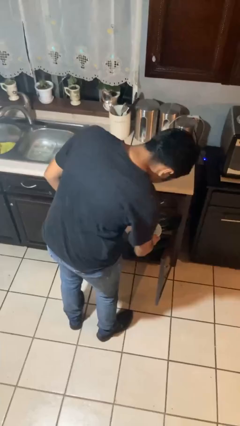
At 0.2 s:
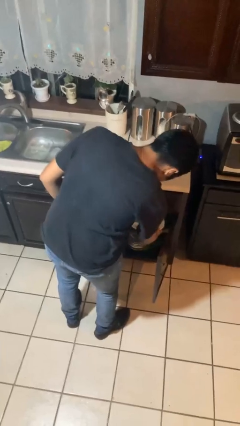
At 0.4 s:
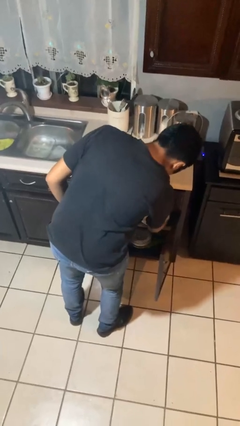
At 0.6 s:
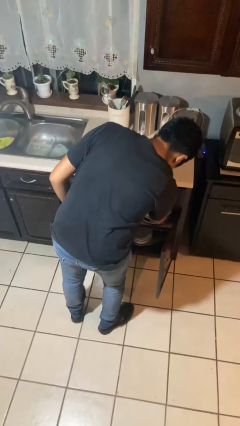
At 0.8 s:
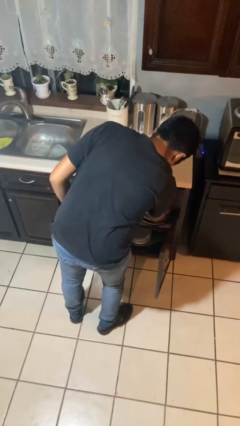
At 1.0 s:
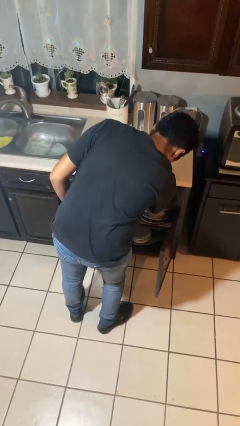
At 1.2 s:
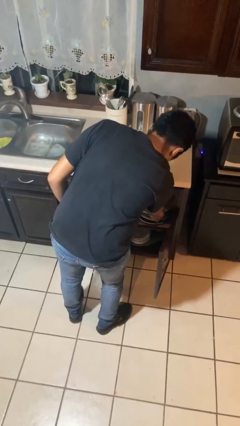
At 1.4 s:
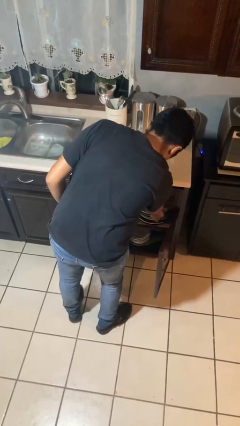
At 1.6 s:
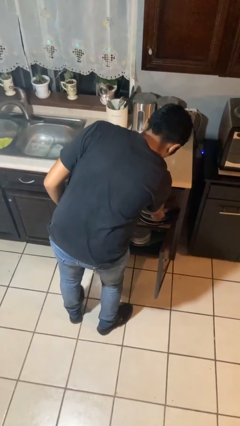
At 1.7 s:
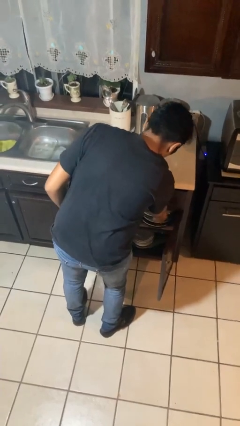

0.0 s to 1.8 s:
person takes object from cabinet

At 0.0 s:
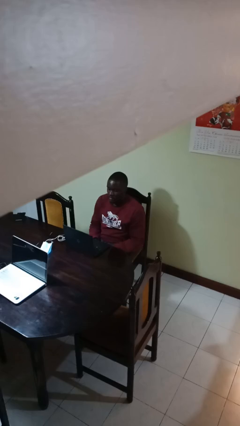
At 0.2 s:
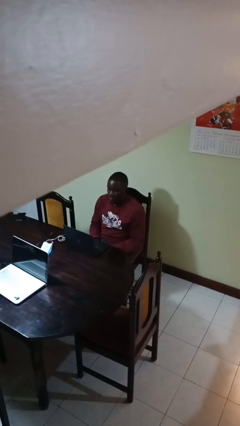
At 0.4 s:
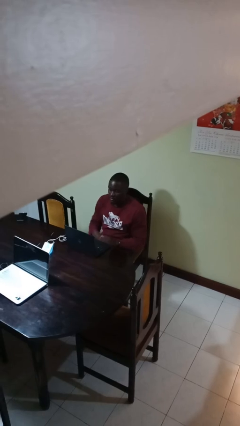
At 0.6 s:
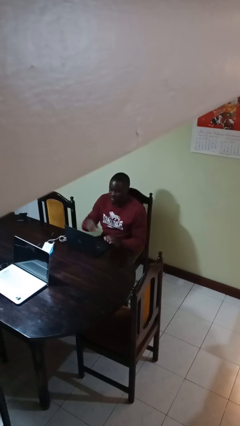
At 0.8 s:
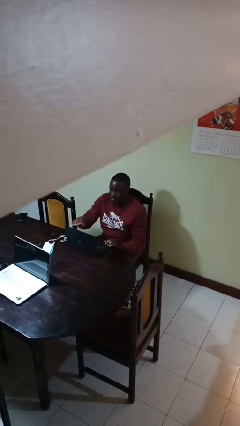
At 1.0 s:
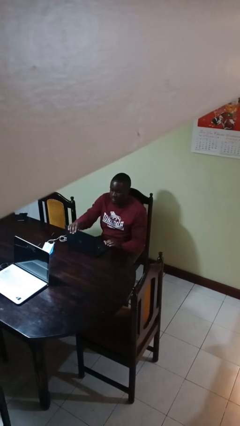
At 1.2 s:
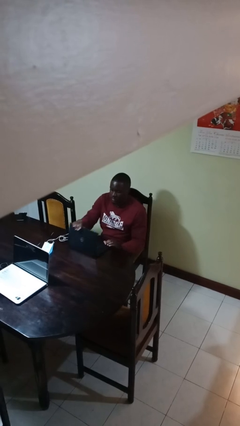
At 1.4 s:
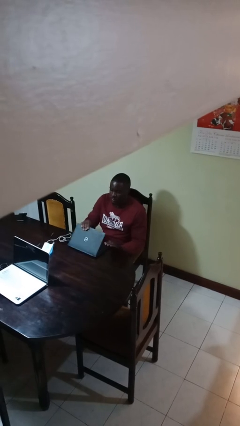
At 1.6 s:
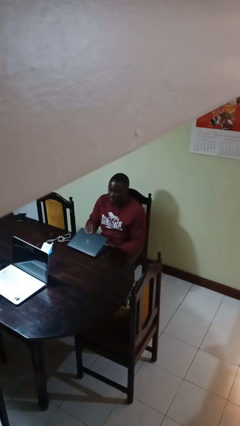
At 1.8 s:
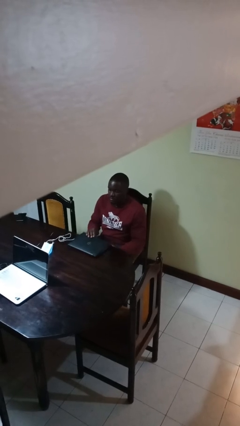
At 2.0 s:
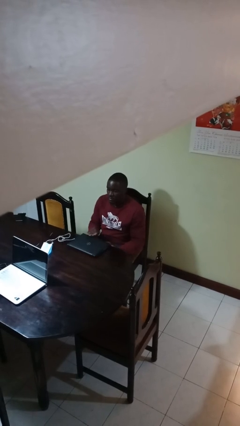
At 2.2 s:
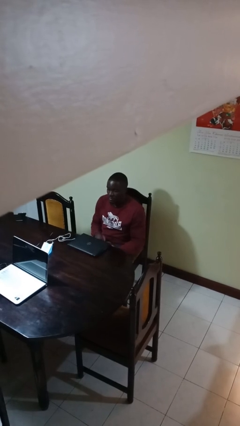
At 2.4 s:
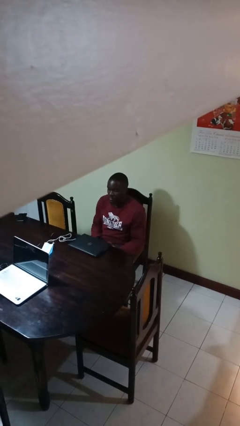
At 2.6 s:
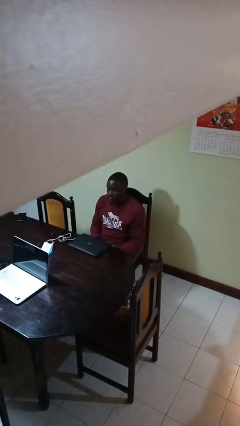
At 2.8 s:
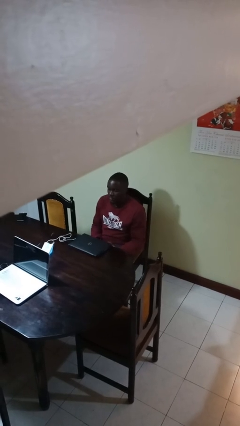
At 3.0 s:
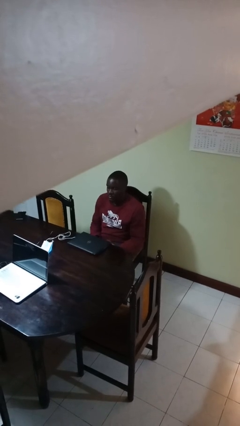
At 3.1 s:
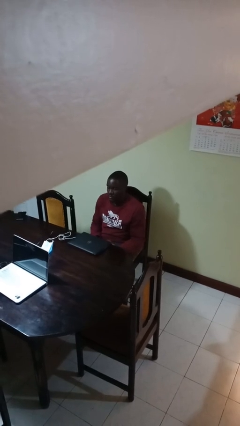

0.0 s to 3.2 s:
person closes laptop

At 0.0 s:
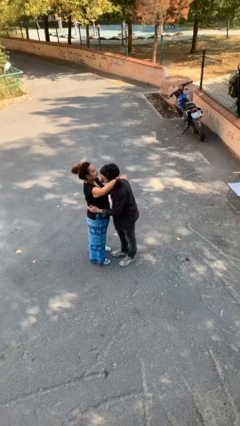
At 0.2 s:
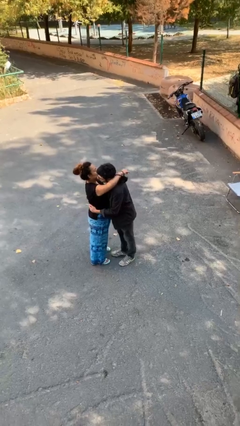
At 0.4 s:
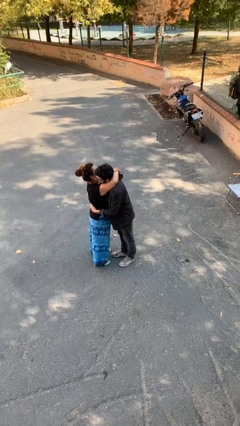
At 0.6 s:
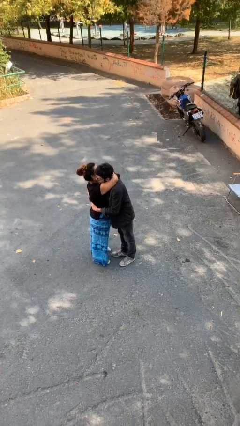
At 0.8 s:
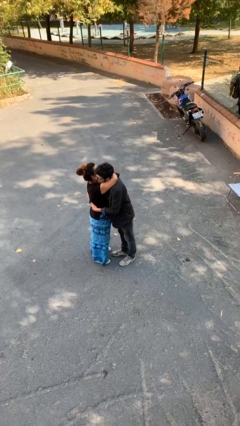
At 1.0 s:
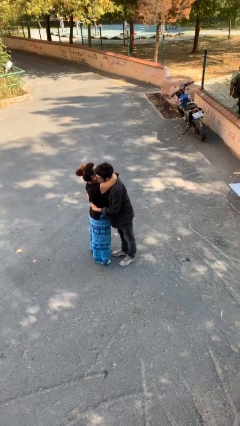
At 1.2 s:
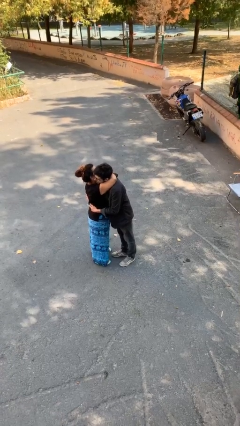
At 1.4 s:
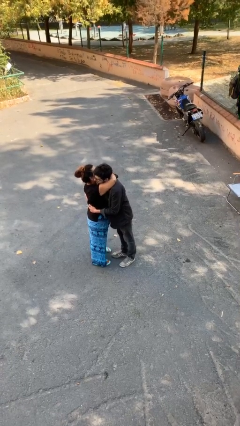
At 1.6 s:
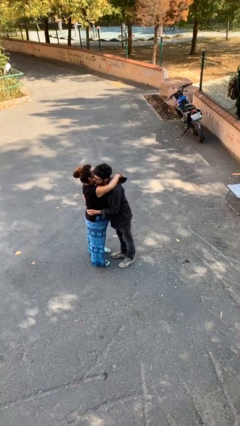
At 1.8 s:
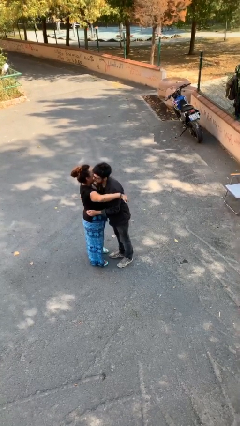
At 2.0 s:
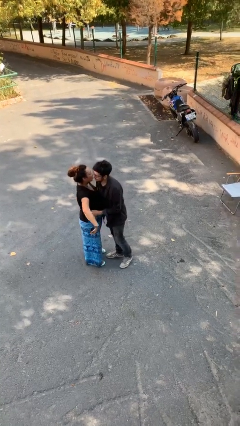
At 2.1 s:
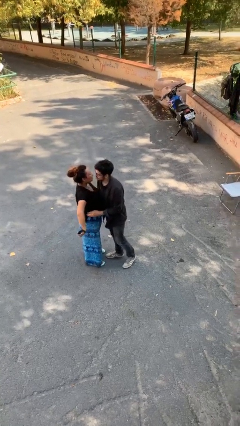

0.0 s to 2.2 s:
person embraces person

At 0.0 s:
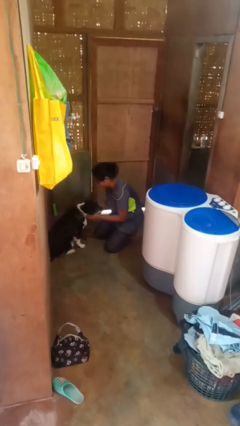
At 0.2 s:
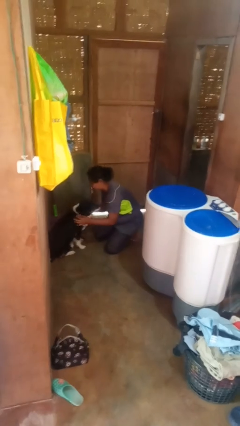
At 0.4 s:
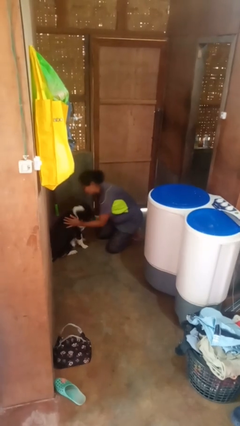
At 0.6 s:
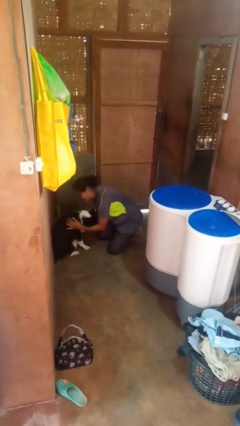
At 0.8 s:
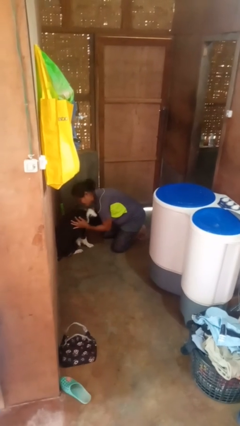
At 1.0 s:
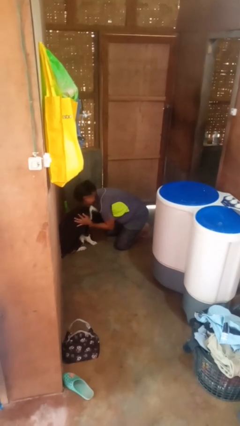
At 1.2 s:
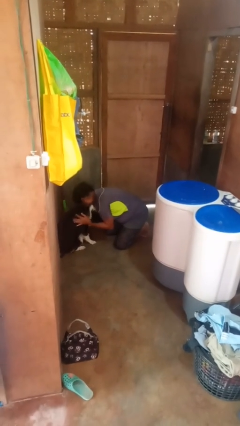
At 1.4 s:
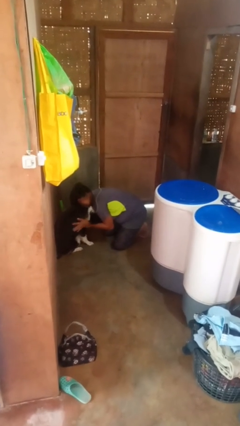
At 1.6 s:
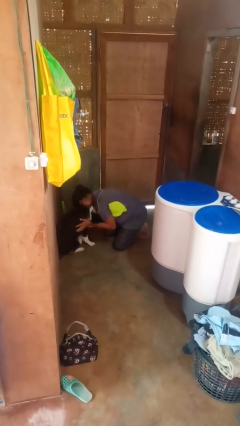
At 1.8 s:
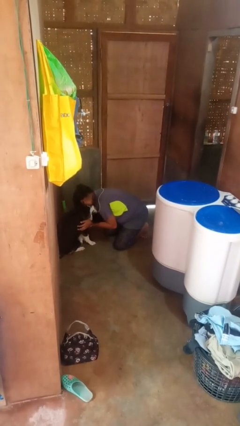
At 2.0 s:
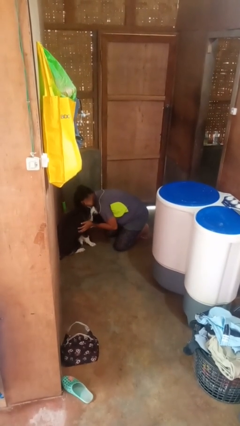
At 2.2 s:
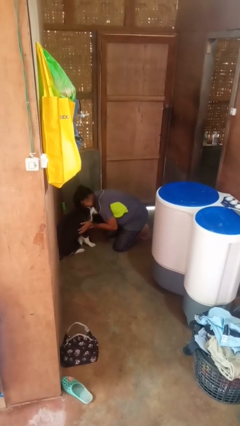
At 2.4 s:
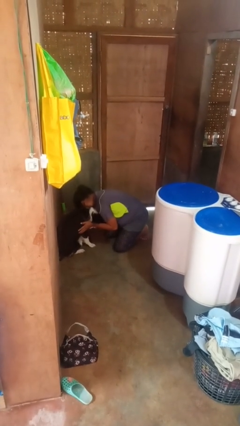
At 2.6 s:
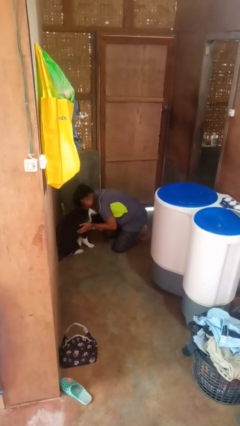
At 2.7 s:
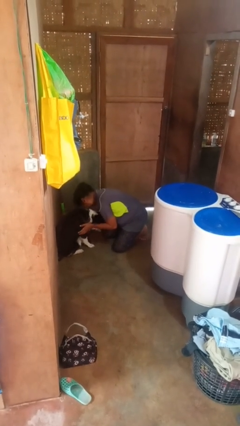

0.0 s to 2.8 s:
person hugs cat

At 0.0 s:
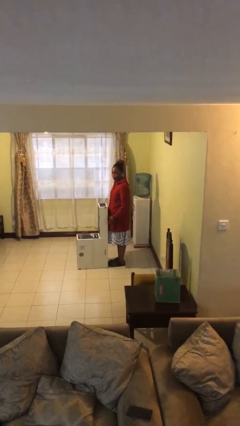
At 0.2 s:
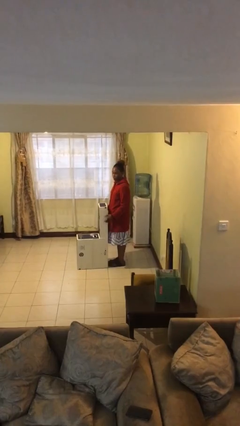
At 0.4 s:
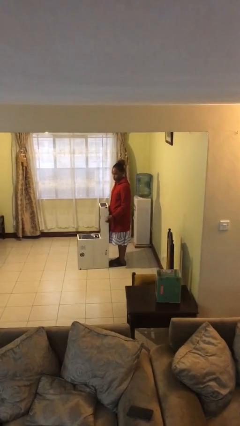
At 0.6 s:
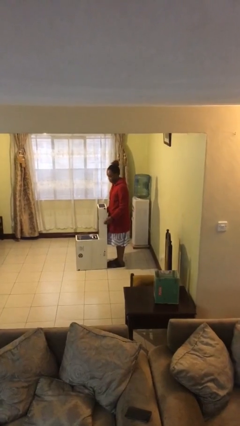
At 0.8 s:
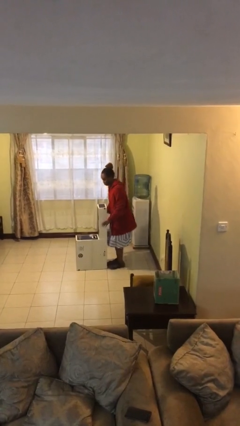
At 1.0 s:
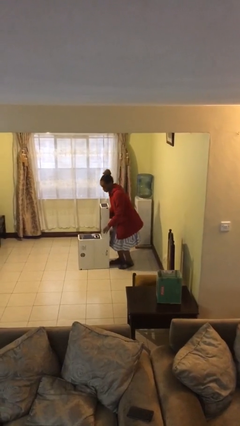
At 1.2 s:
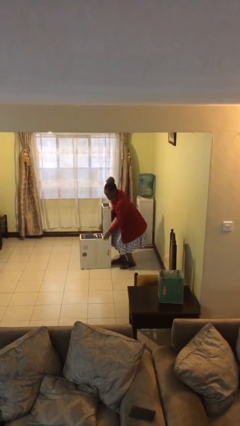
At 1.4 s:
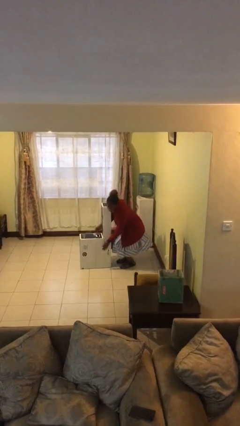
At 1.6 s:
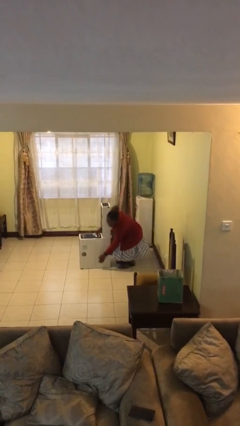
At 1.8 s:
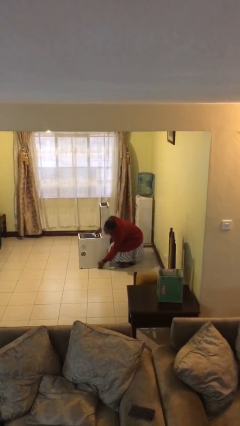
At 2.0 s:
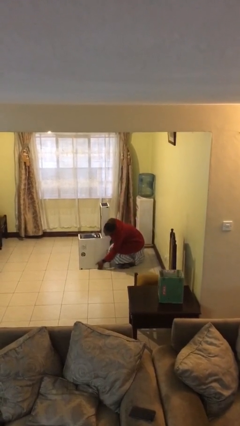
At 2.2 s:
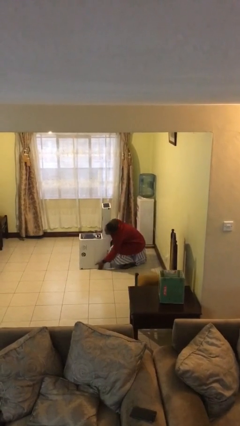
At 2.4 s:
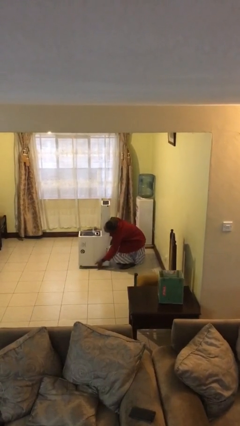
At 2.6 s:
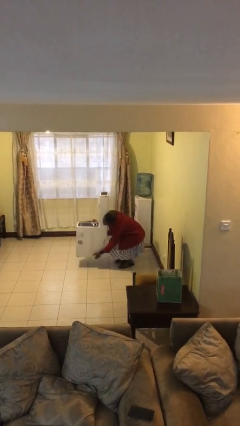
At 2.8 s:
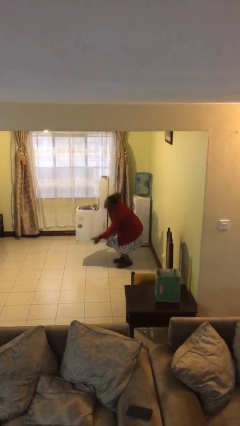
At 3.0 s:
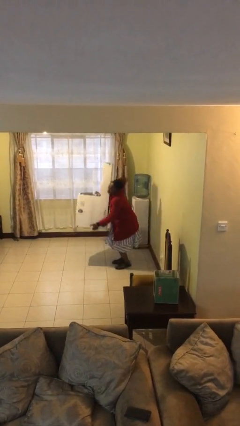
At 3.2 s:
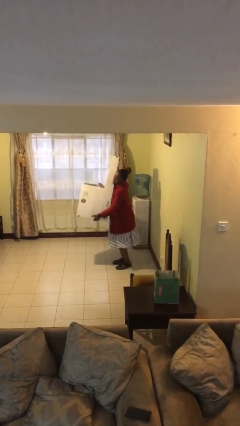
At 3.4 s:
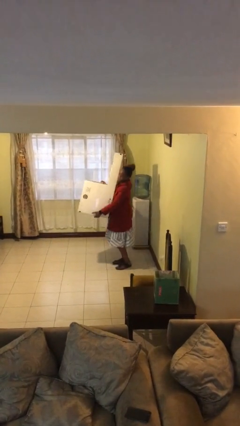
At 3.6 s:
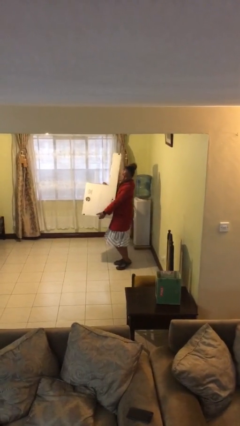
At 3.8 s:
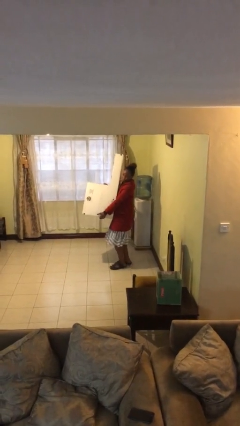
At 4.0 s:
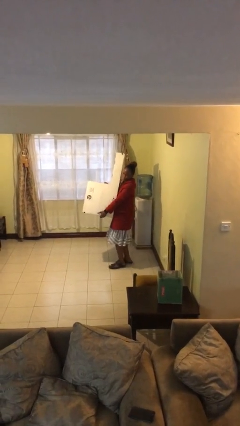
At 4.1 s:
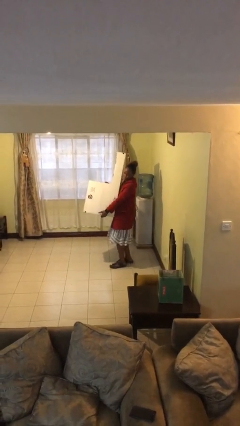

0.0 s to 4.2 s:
person picks up object from floor

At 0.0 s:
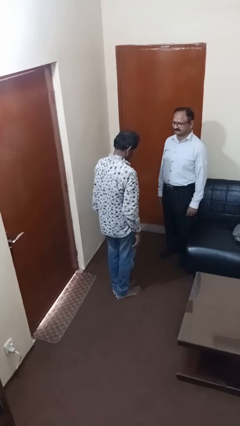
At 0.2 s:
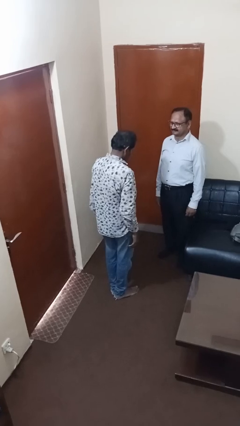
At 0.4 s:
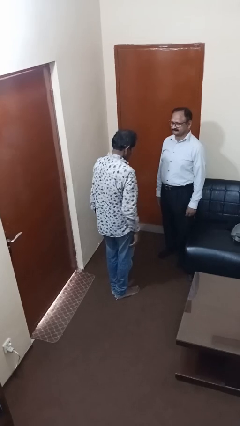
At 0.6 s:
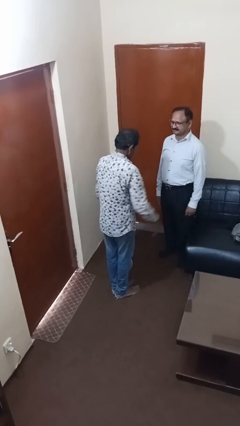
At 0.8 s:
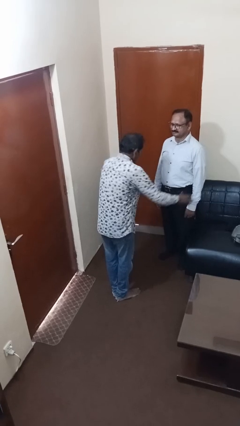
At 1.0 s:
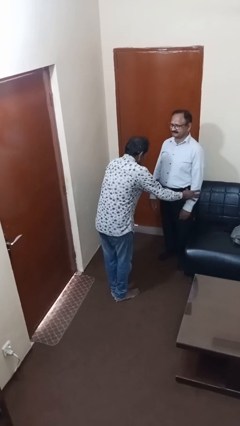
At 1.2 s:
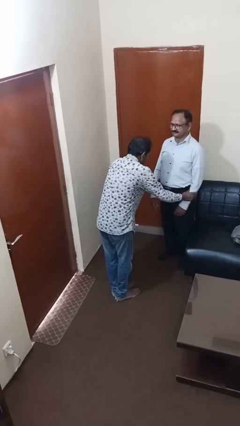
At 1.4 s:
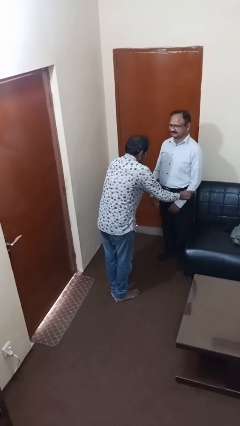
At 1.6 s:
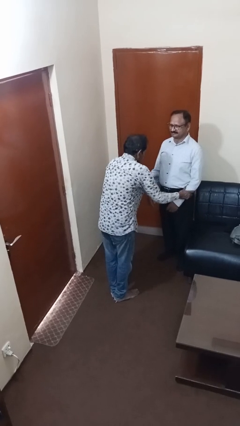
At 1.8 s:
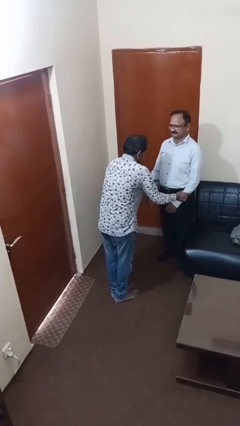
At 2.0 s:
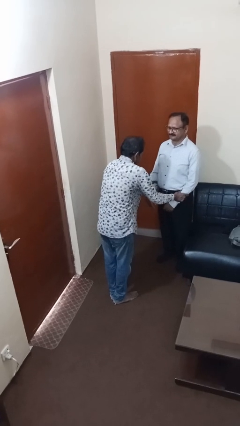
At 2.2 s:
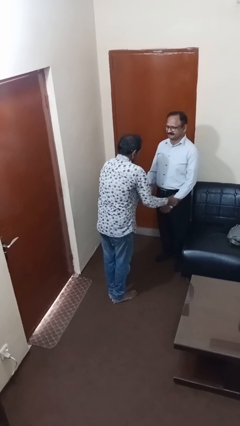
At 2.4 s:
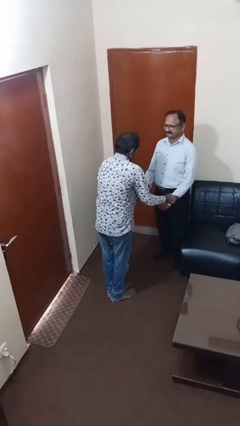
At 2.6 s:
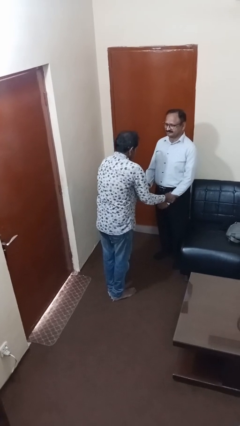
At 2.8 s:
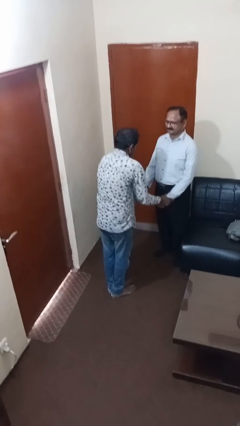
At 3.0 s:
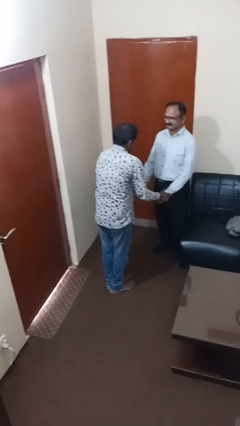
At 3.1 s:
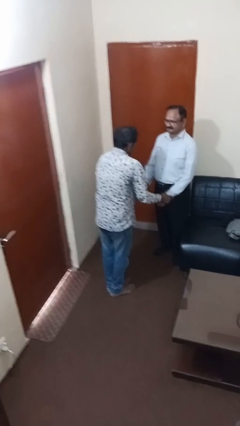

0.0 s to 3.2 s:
person grabs person by forearm
